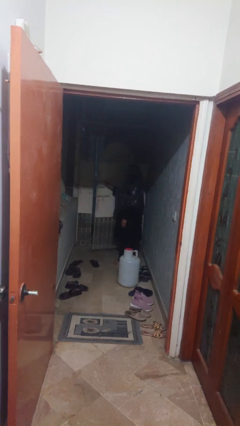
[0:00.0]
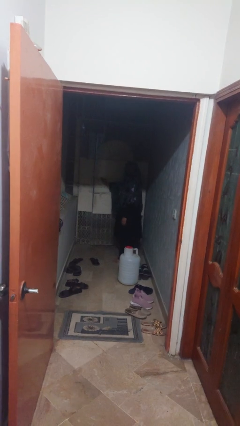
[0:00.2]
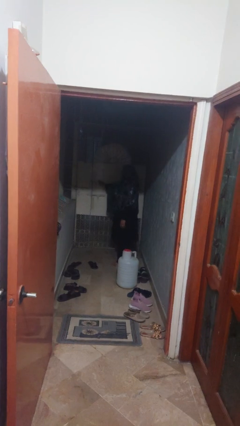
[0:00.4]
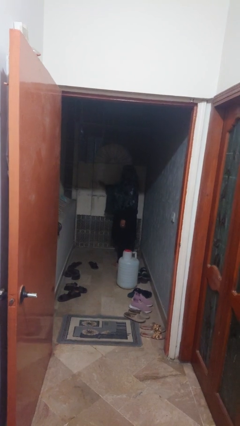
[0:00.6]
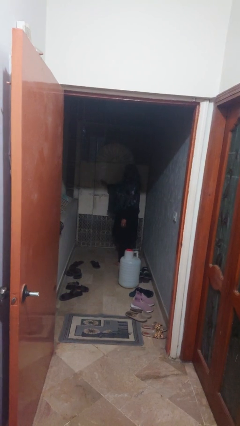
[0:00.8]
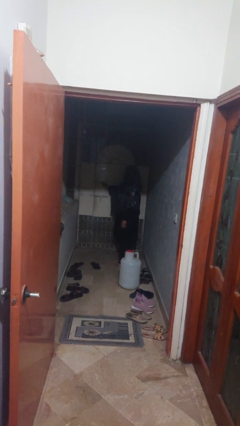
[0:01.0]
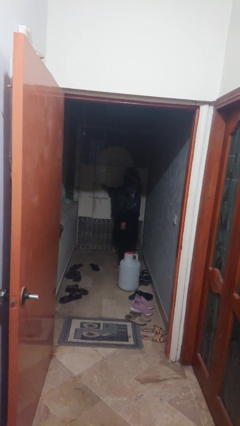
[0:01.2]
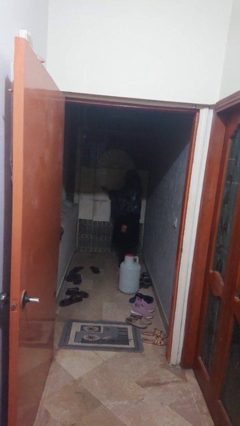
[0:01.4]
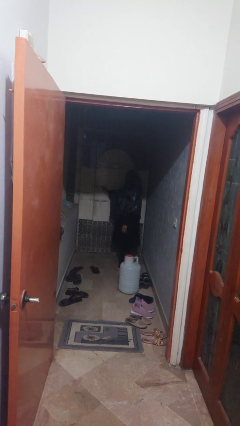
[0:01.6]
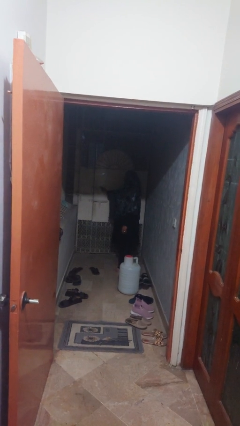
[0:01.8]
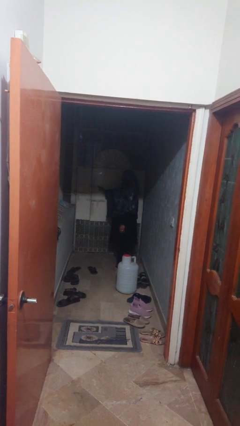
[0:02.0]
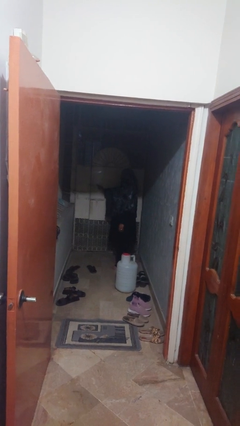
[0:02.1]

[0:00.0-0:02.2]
person closes gate

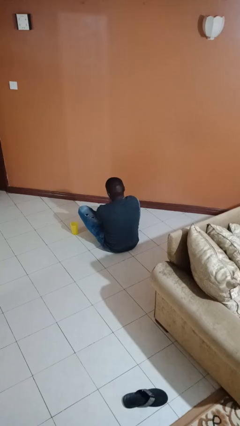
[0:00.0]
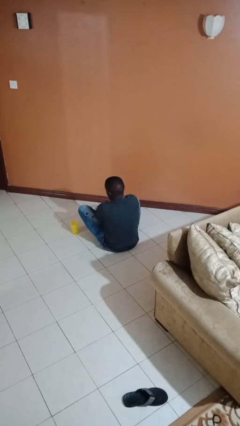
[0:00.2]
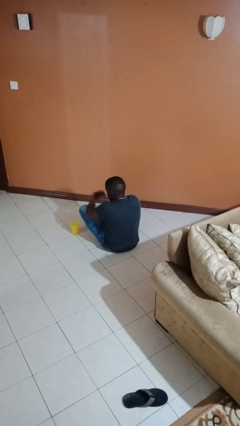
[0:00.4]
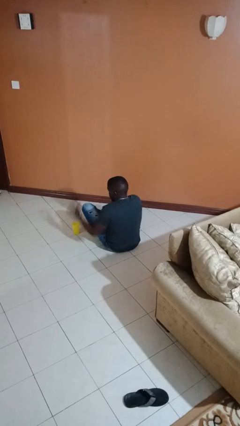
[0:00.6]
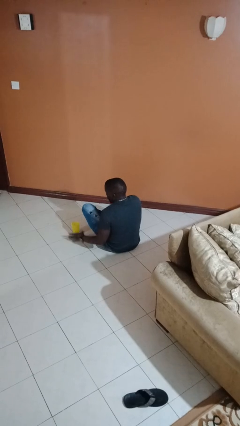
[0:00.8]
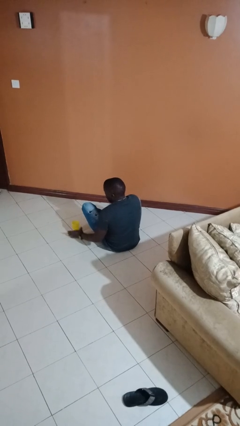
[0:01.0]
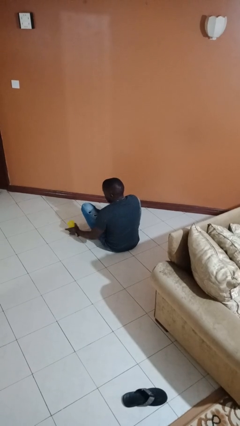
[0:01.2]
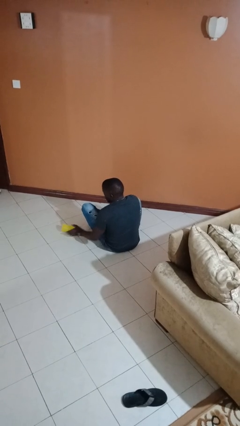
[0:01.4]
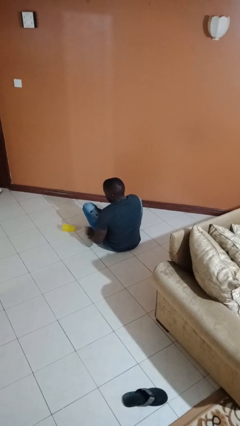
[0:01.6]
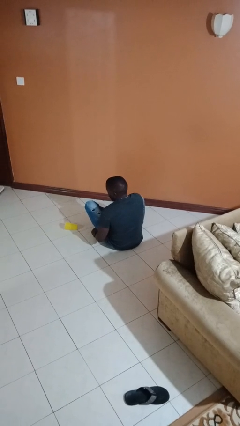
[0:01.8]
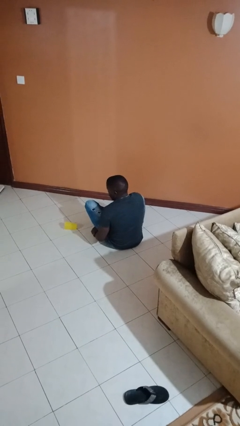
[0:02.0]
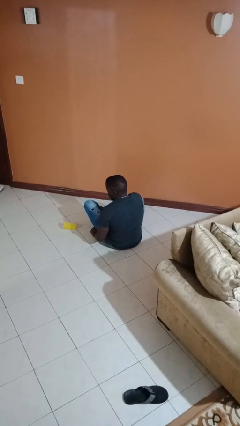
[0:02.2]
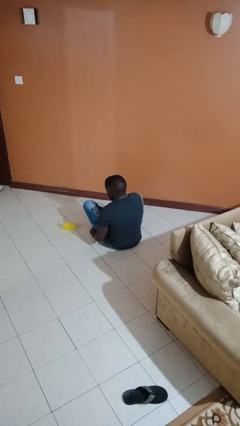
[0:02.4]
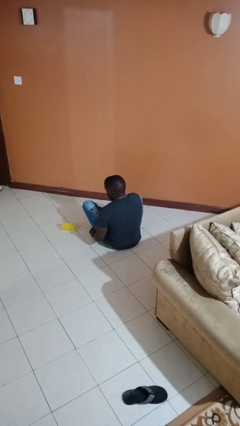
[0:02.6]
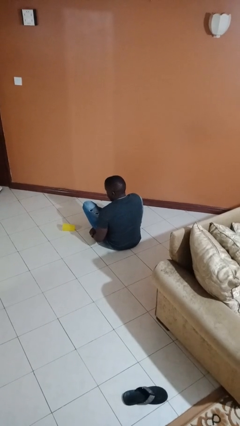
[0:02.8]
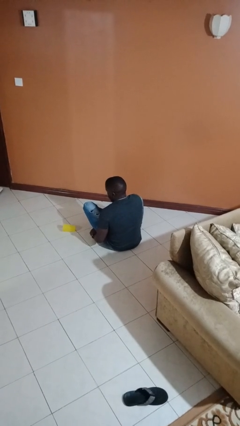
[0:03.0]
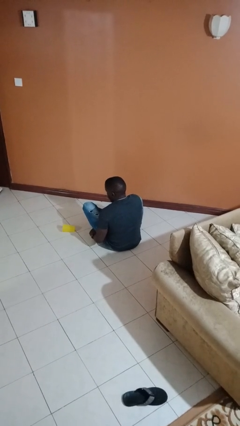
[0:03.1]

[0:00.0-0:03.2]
person spills on floor

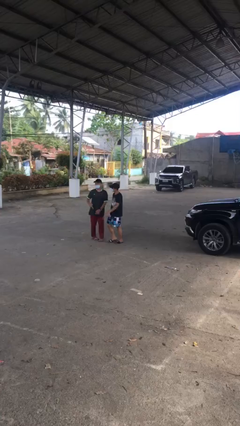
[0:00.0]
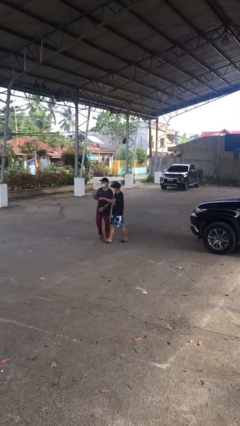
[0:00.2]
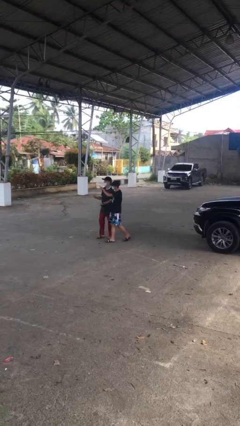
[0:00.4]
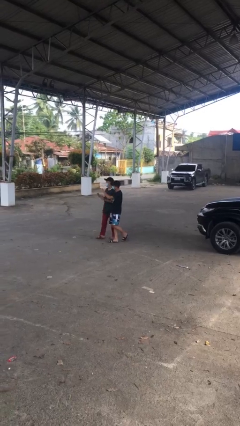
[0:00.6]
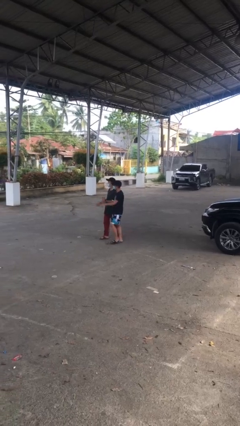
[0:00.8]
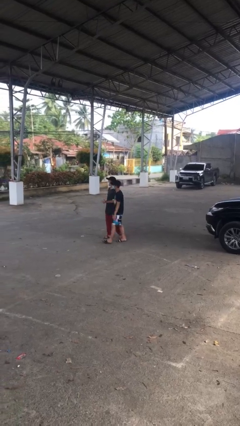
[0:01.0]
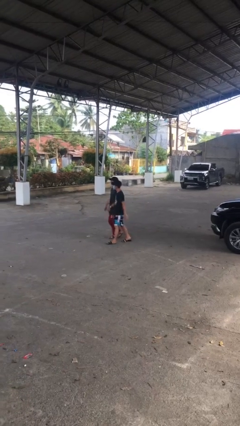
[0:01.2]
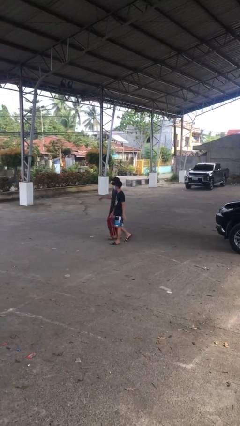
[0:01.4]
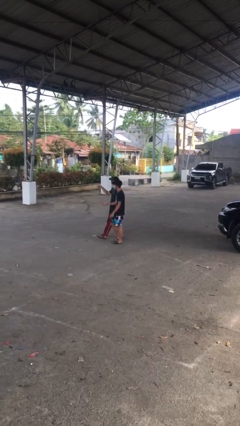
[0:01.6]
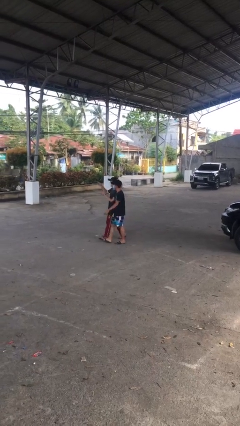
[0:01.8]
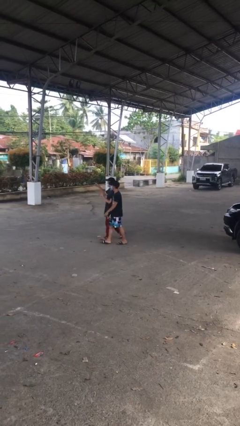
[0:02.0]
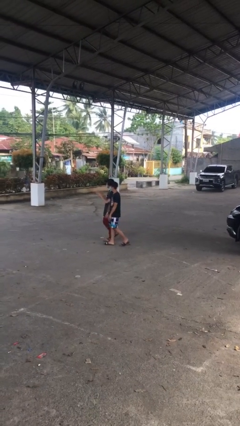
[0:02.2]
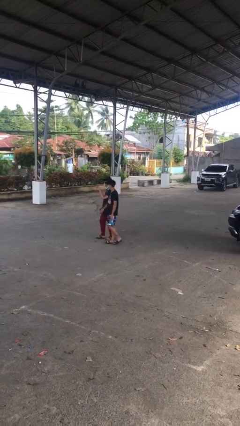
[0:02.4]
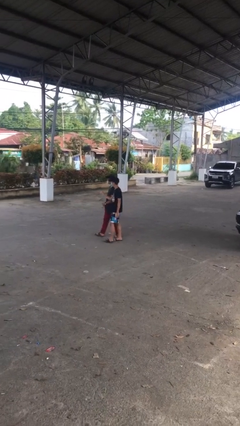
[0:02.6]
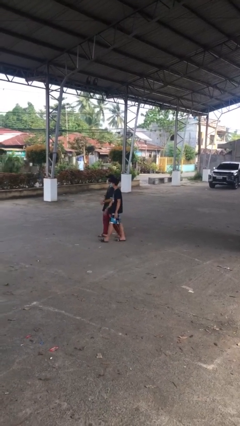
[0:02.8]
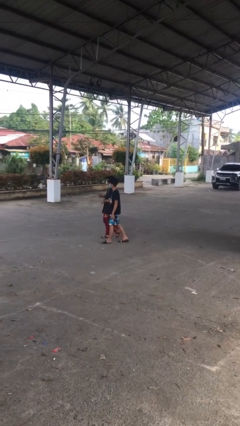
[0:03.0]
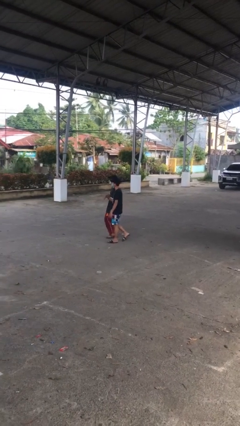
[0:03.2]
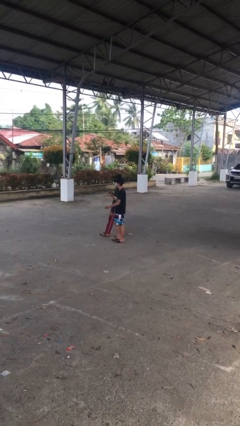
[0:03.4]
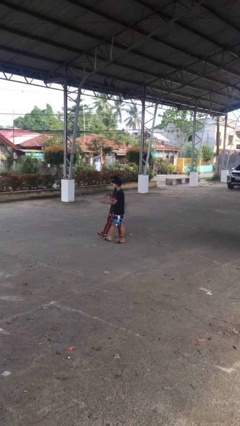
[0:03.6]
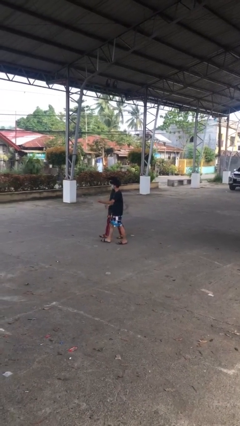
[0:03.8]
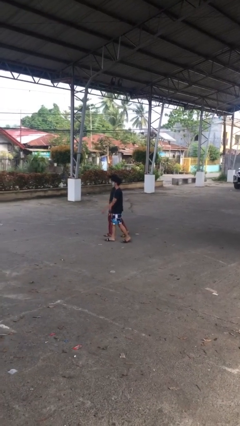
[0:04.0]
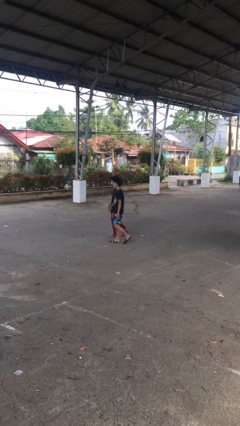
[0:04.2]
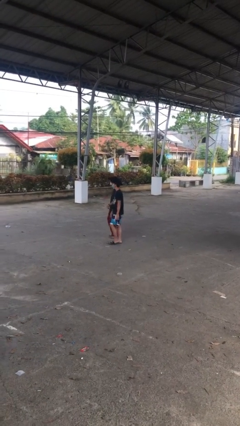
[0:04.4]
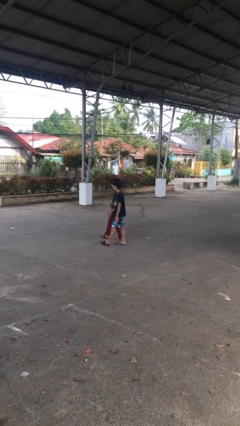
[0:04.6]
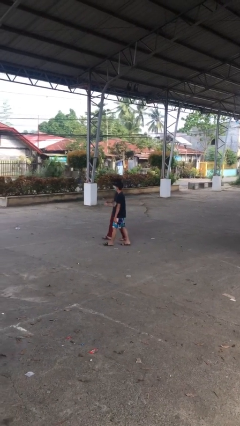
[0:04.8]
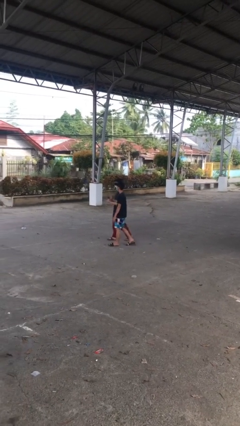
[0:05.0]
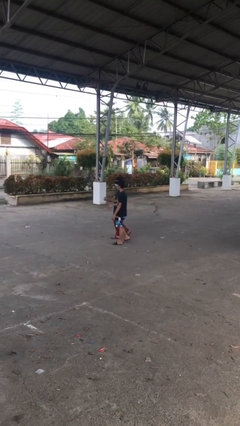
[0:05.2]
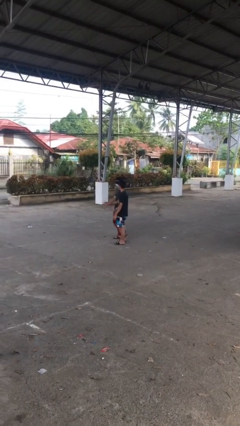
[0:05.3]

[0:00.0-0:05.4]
person talks to person

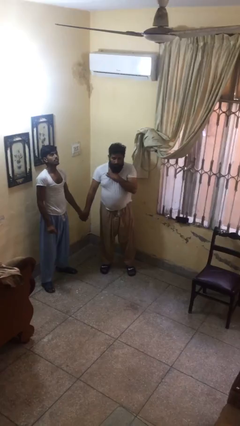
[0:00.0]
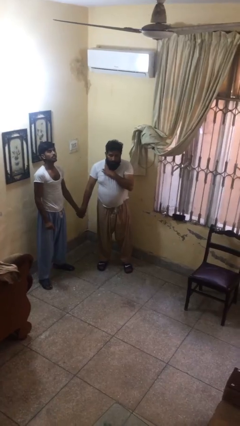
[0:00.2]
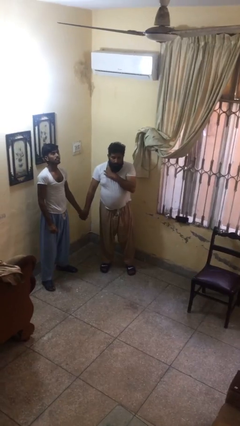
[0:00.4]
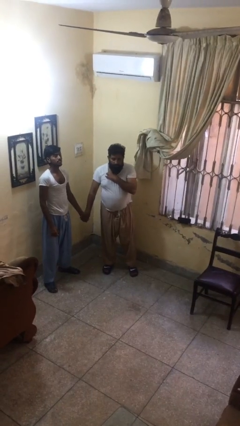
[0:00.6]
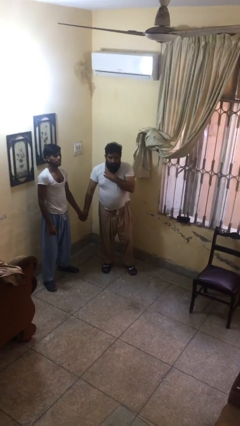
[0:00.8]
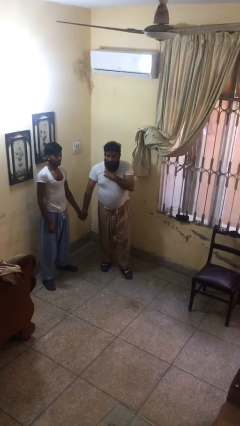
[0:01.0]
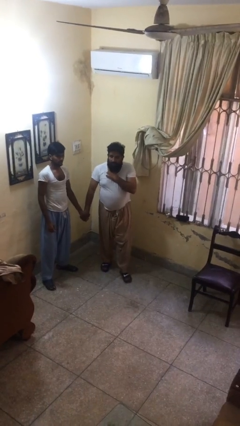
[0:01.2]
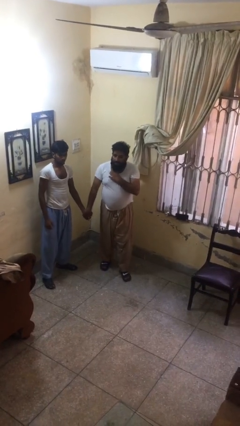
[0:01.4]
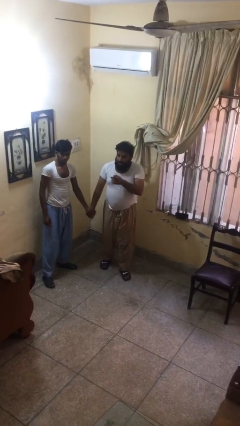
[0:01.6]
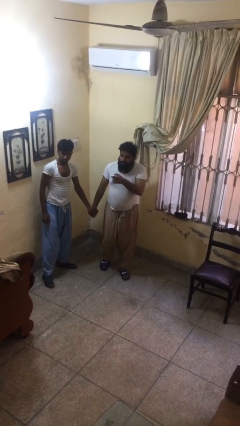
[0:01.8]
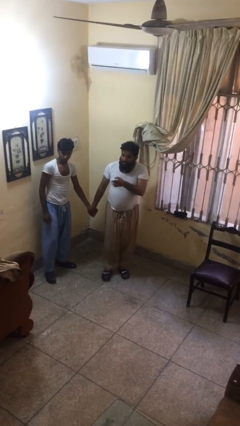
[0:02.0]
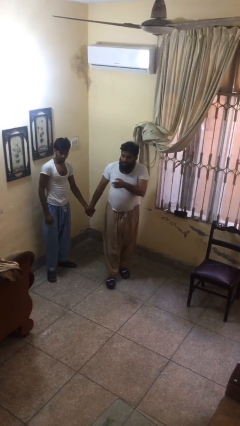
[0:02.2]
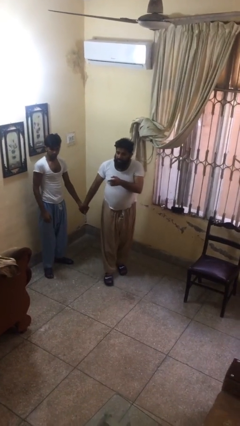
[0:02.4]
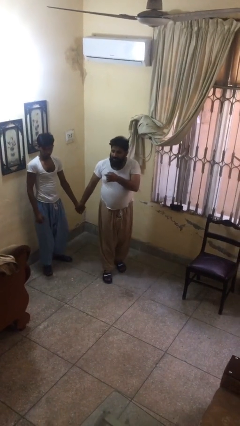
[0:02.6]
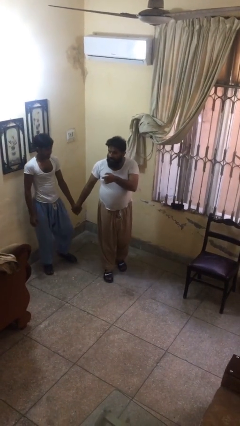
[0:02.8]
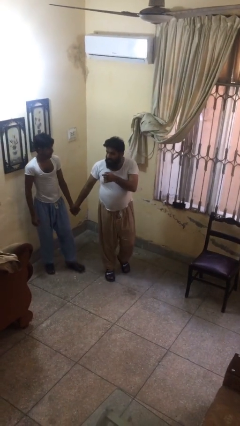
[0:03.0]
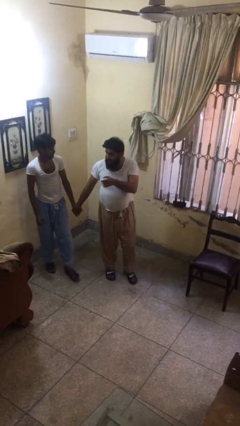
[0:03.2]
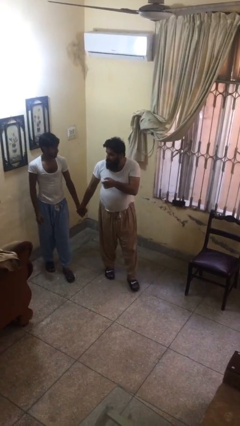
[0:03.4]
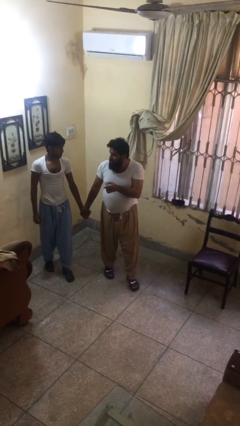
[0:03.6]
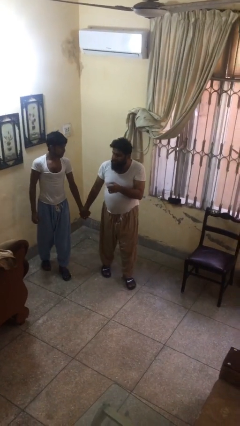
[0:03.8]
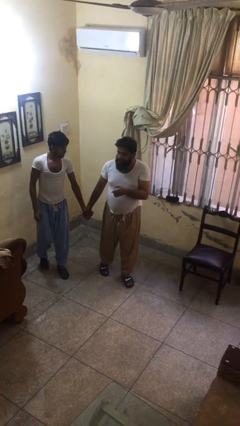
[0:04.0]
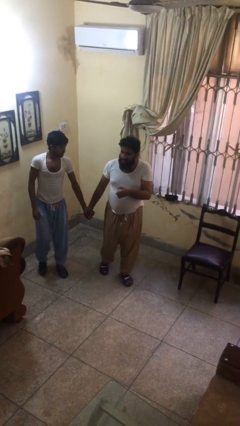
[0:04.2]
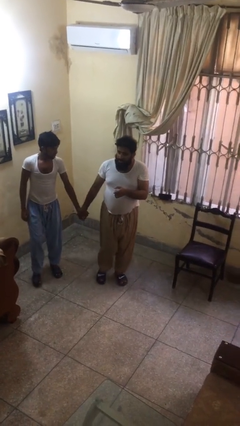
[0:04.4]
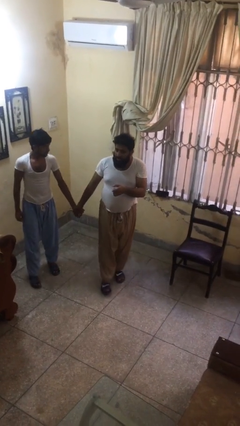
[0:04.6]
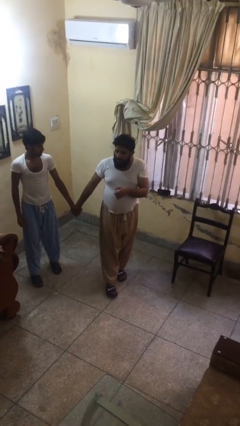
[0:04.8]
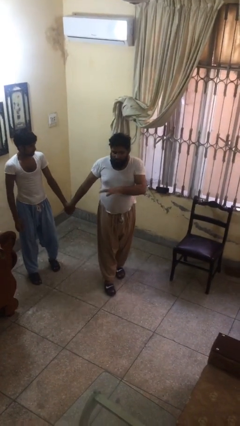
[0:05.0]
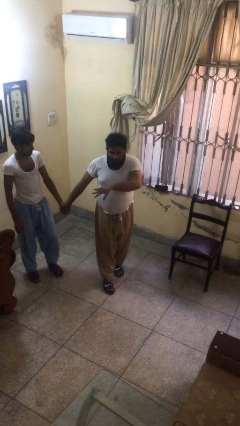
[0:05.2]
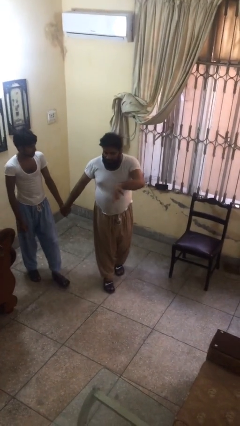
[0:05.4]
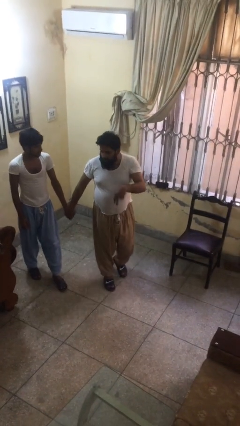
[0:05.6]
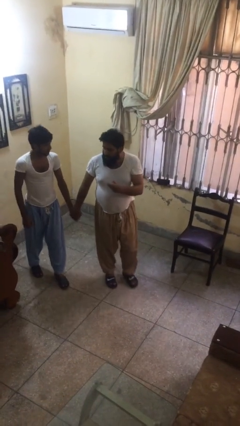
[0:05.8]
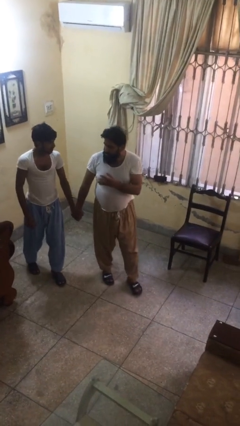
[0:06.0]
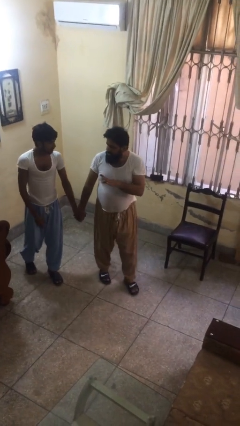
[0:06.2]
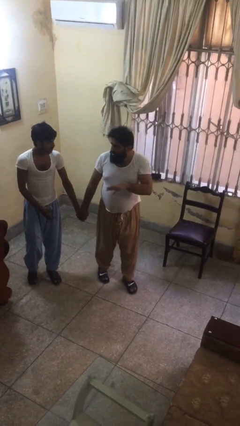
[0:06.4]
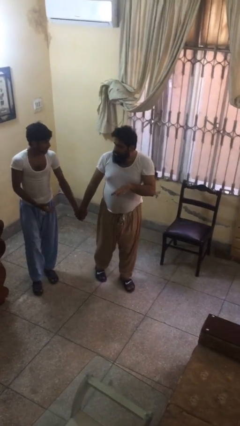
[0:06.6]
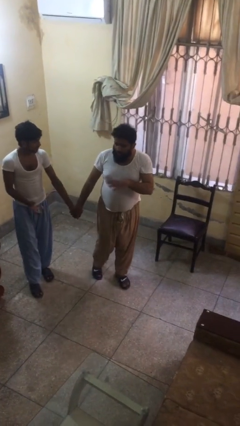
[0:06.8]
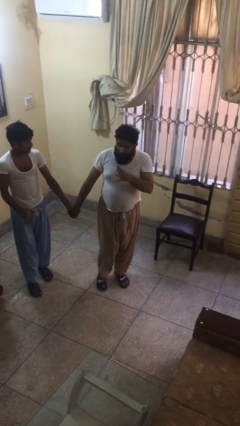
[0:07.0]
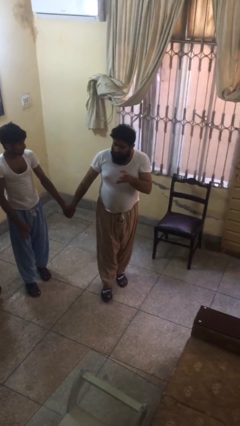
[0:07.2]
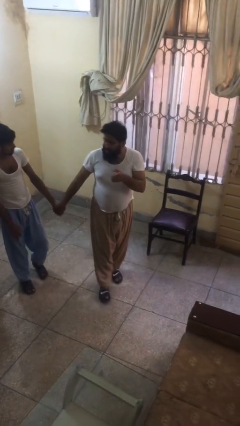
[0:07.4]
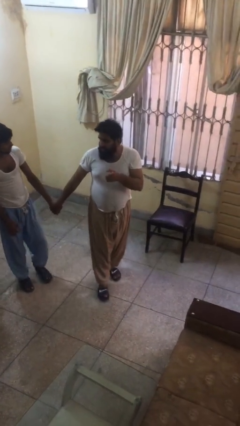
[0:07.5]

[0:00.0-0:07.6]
person holds hand
